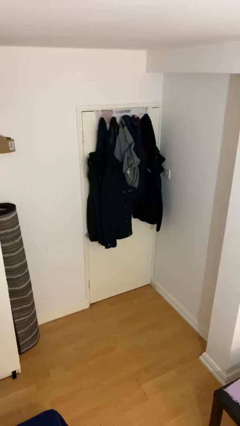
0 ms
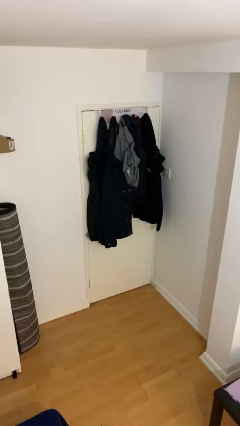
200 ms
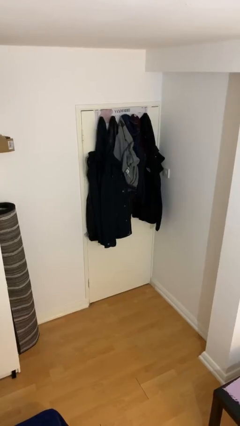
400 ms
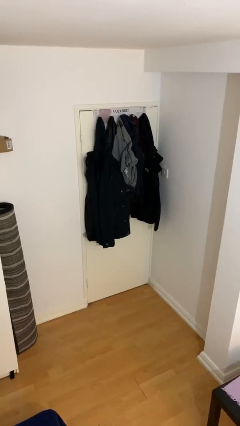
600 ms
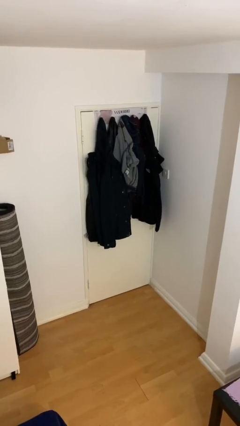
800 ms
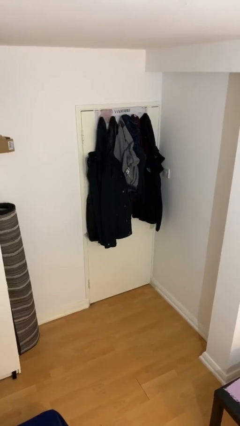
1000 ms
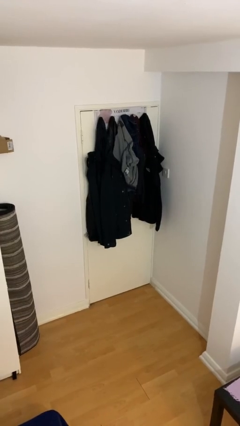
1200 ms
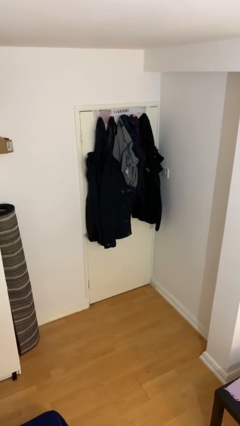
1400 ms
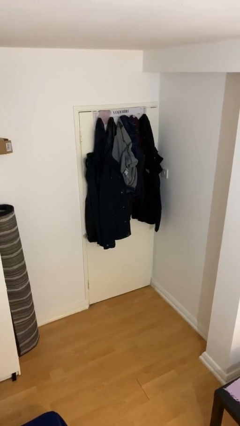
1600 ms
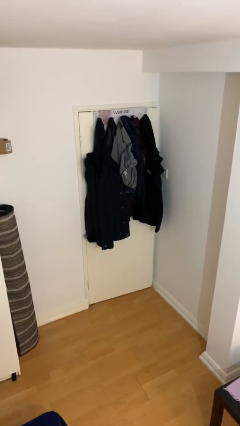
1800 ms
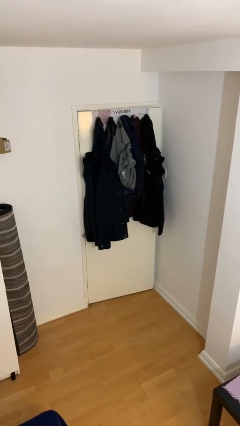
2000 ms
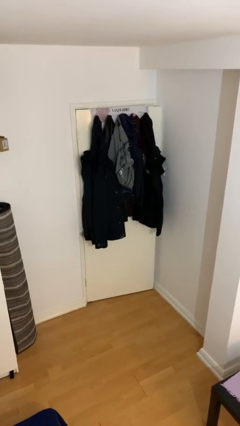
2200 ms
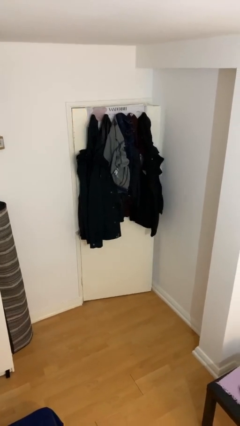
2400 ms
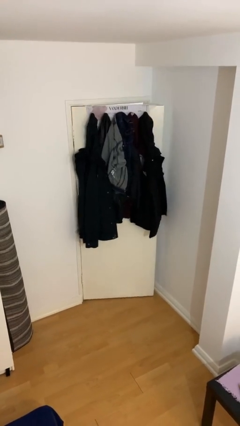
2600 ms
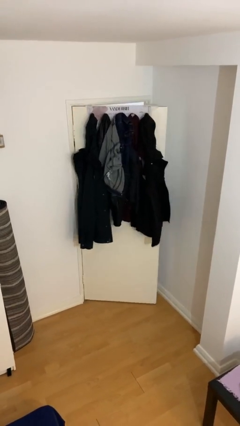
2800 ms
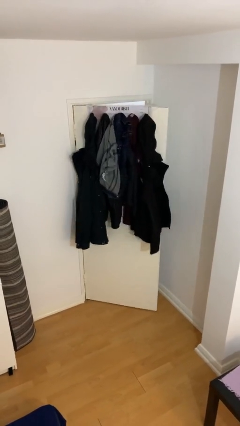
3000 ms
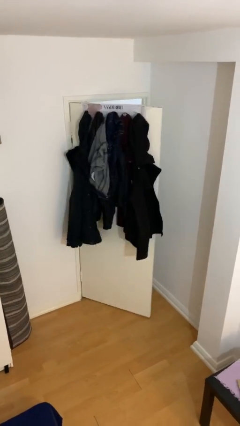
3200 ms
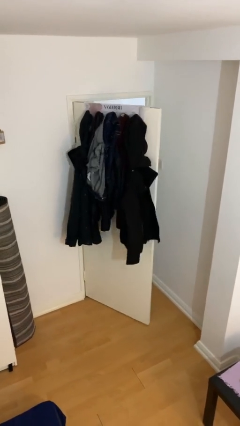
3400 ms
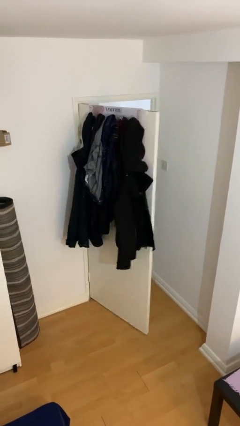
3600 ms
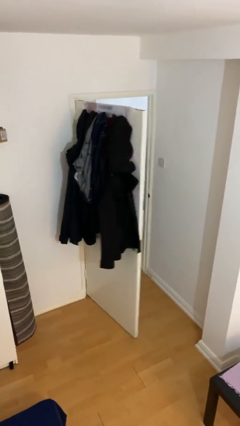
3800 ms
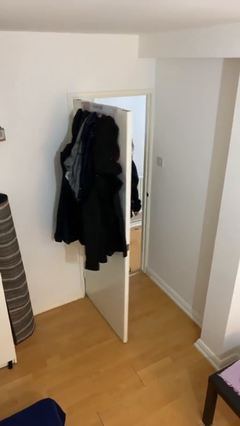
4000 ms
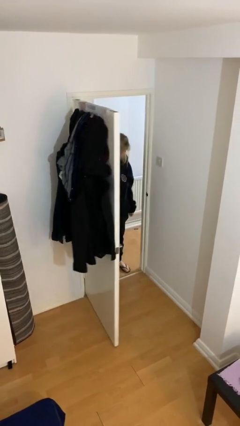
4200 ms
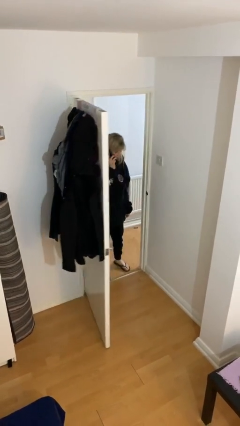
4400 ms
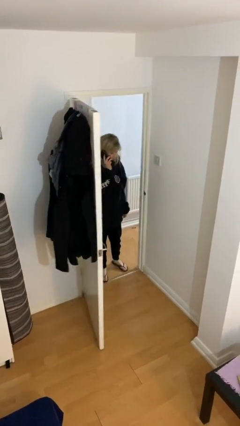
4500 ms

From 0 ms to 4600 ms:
person opens facility door

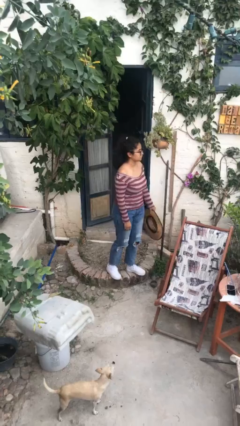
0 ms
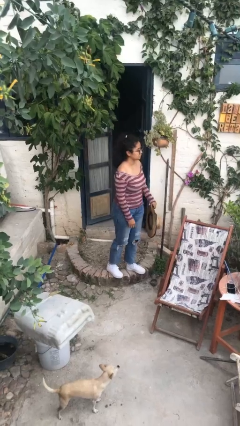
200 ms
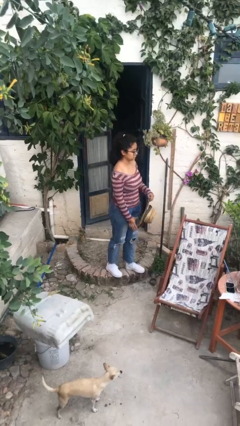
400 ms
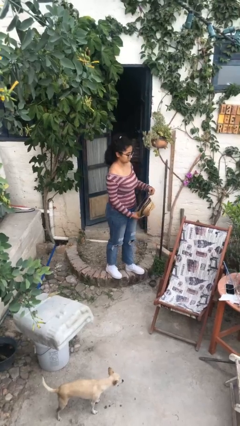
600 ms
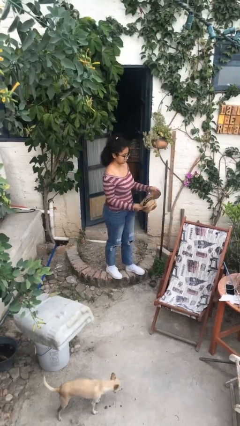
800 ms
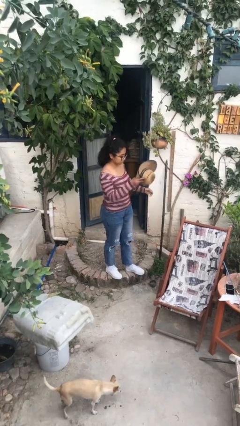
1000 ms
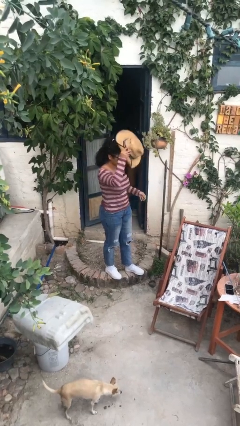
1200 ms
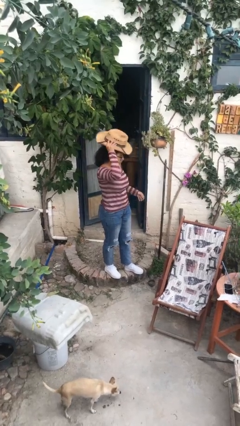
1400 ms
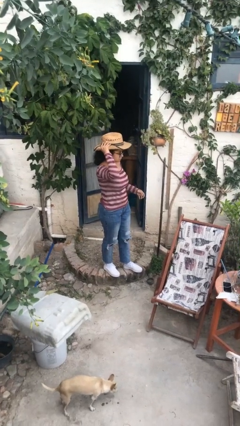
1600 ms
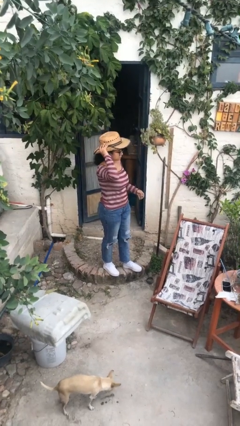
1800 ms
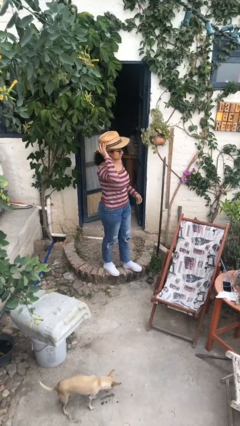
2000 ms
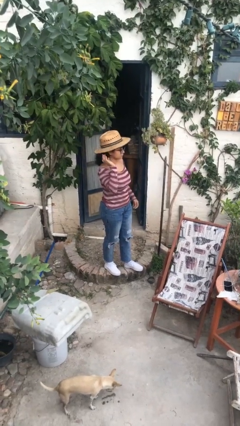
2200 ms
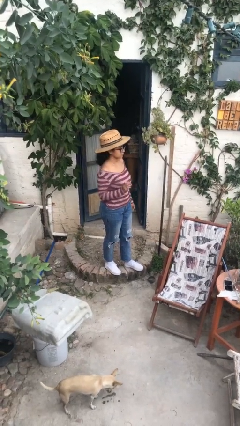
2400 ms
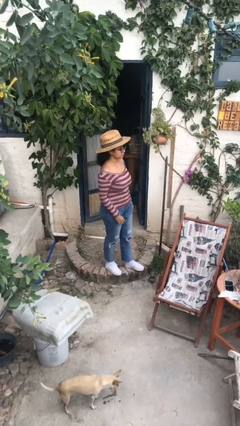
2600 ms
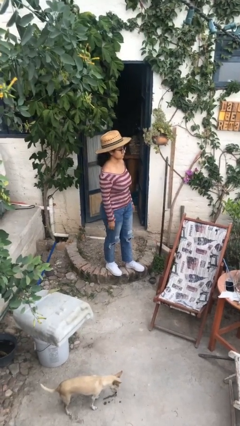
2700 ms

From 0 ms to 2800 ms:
person puts on hat

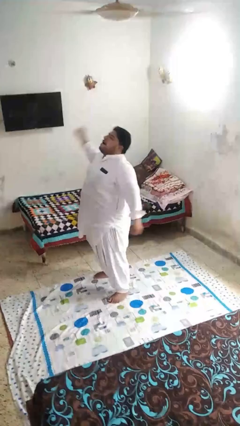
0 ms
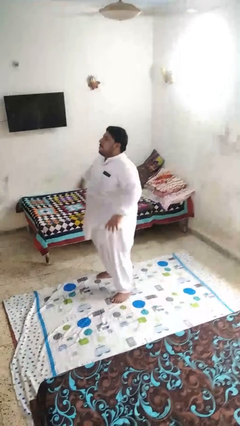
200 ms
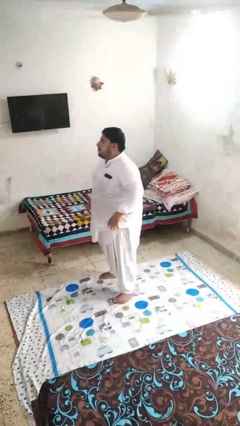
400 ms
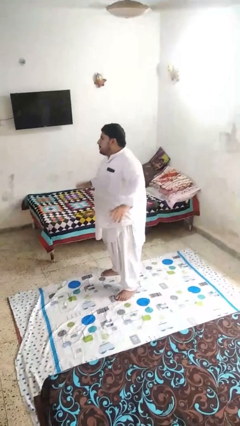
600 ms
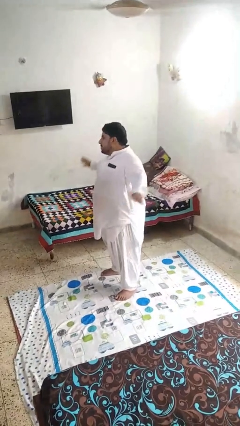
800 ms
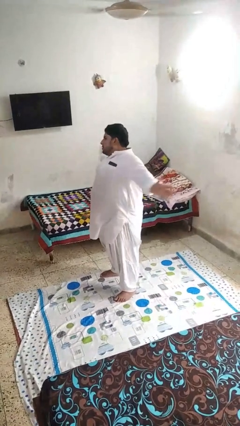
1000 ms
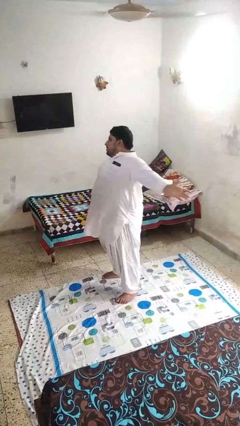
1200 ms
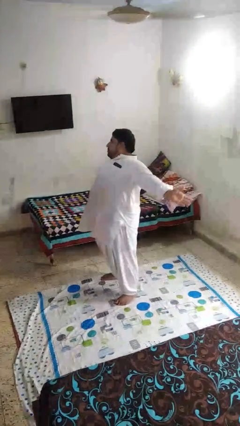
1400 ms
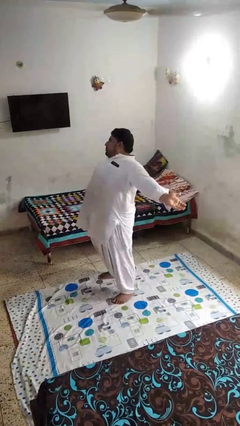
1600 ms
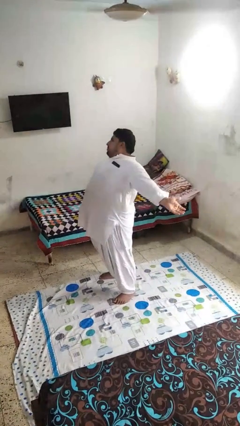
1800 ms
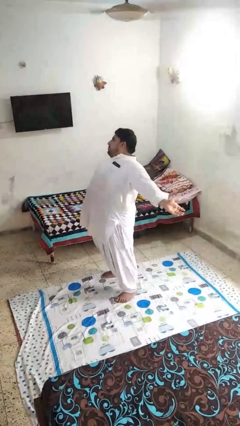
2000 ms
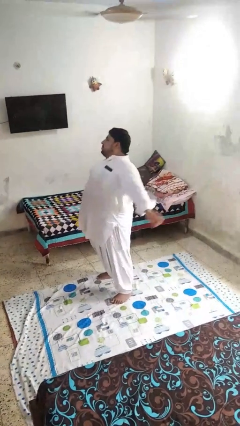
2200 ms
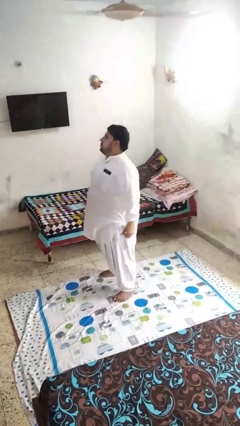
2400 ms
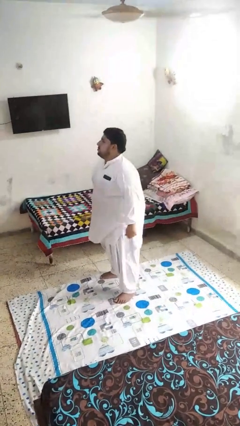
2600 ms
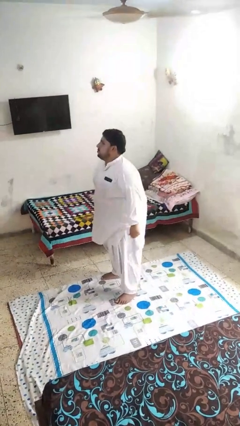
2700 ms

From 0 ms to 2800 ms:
person stretches arms to side

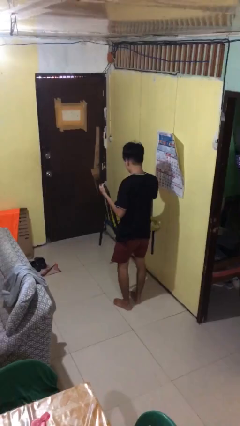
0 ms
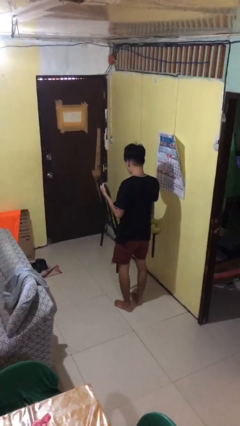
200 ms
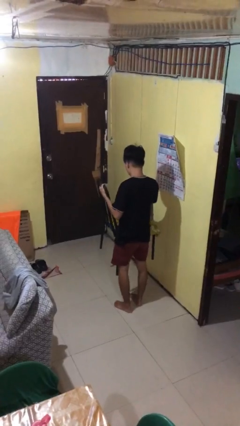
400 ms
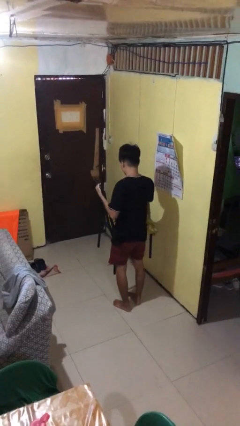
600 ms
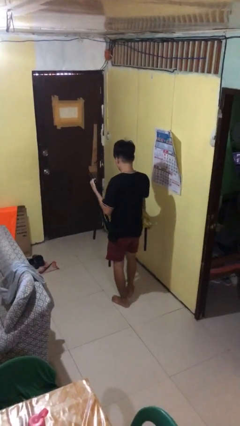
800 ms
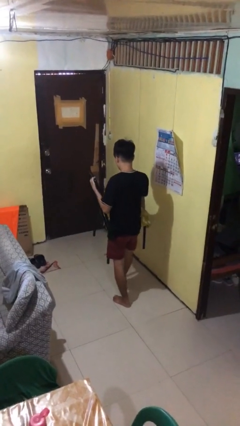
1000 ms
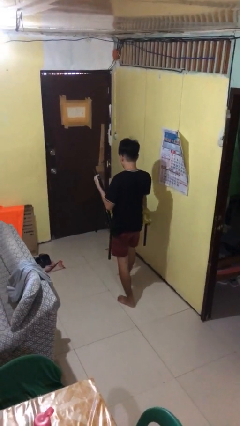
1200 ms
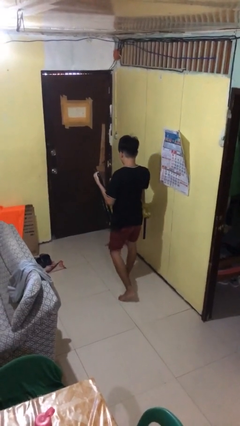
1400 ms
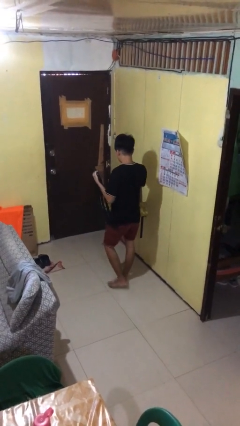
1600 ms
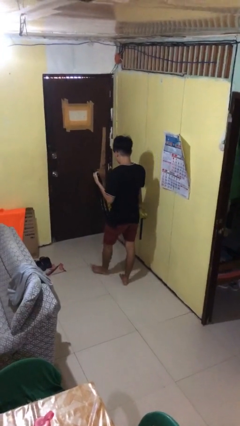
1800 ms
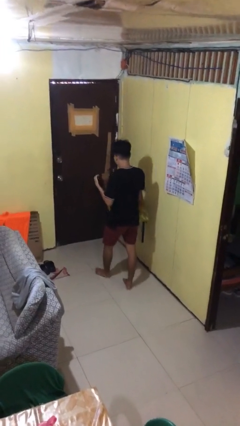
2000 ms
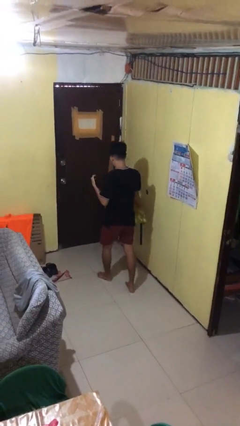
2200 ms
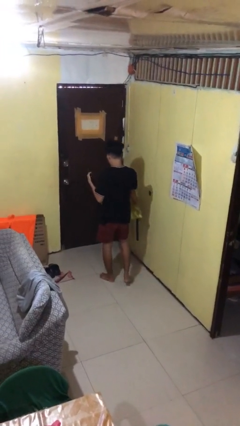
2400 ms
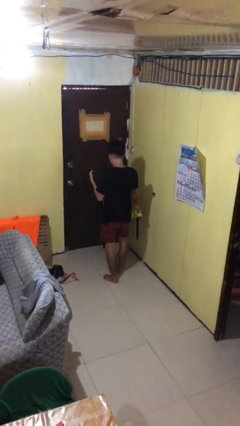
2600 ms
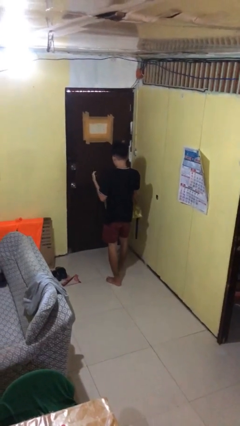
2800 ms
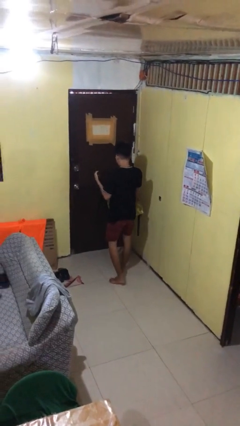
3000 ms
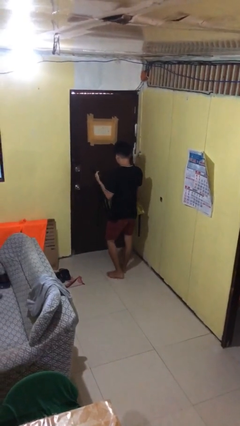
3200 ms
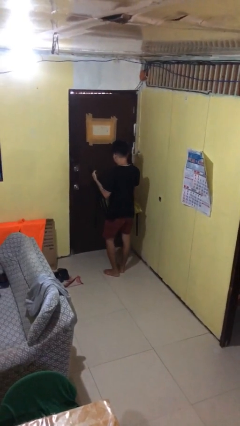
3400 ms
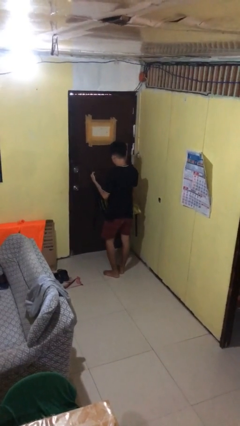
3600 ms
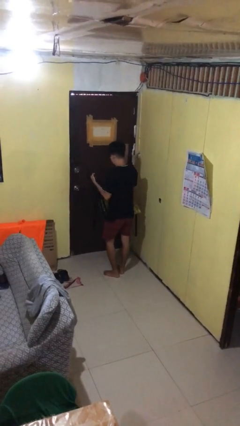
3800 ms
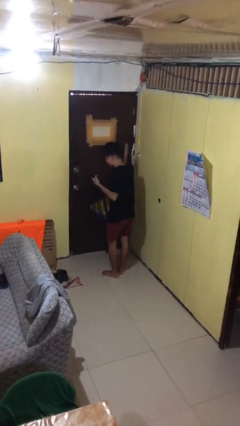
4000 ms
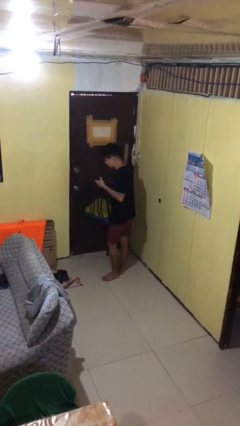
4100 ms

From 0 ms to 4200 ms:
person carries furniture

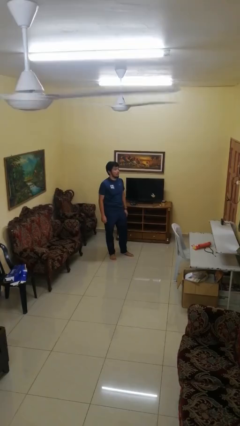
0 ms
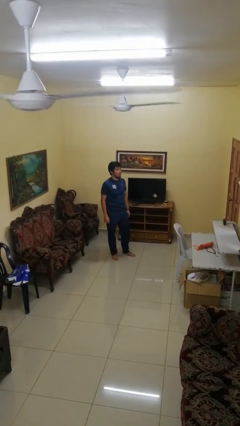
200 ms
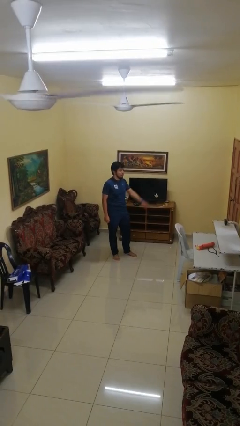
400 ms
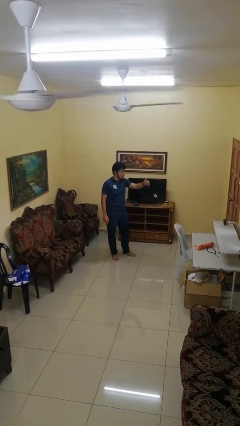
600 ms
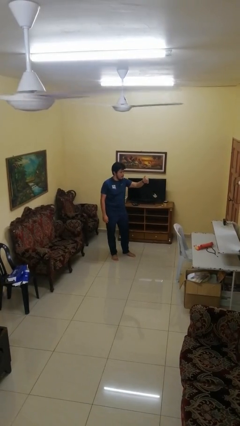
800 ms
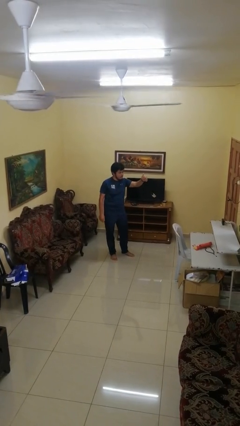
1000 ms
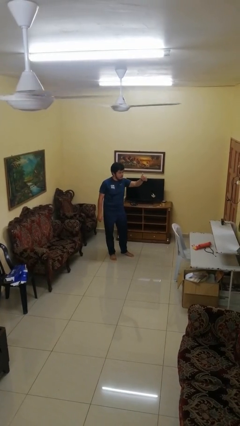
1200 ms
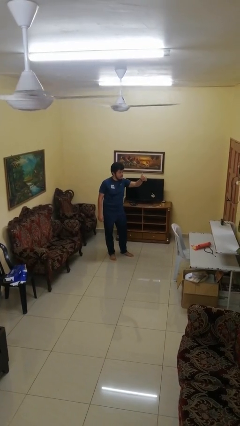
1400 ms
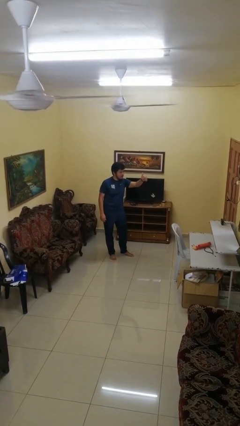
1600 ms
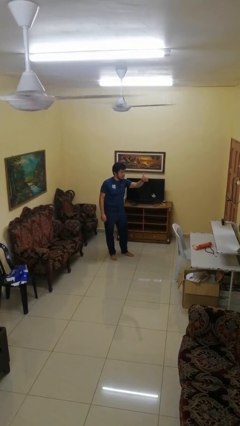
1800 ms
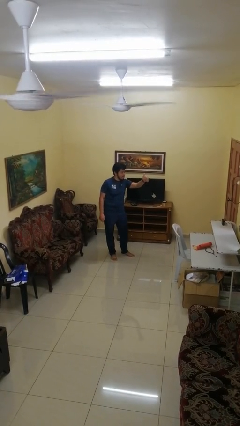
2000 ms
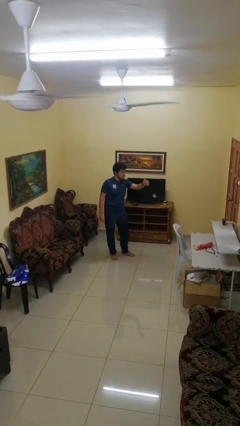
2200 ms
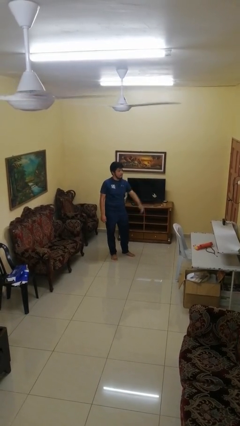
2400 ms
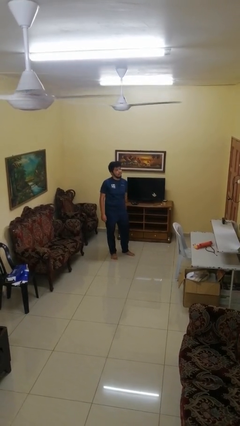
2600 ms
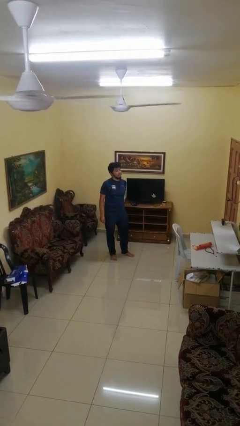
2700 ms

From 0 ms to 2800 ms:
person gestures thumbs up

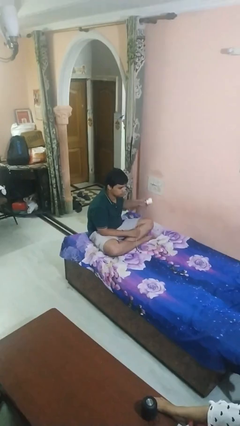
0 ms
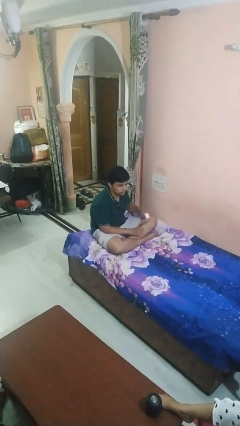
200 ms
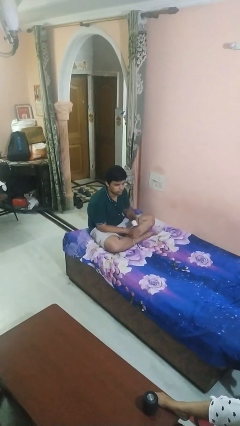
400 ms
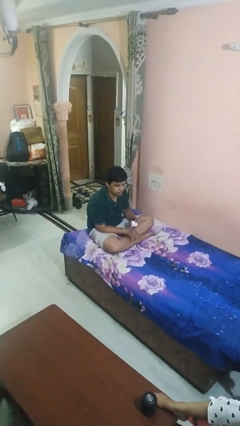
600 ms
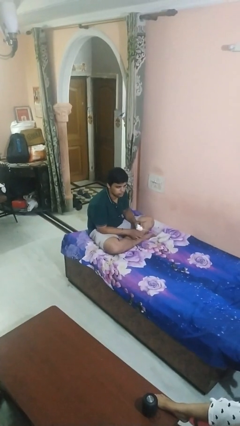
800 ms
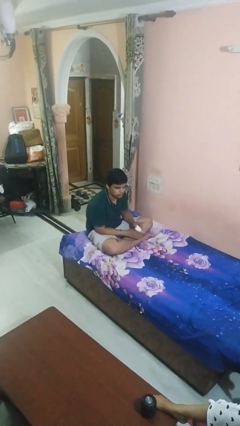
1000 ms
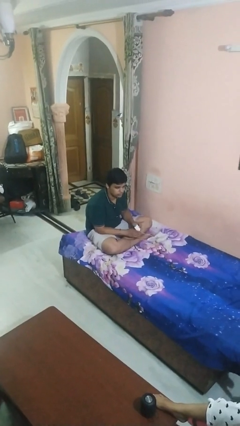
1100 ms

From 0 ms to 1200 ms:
person unplugs from electrical socket
